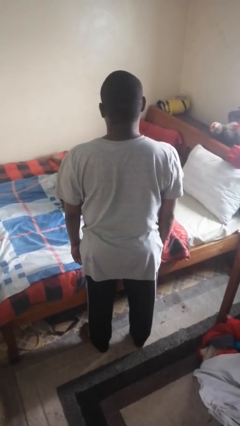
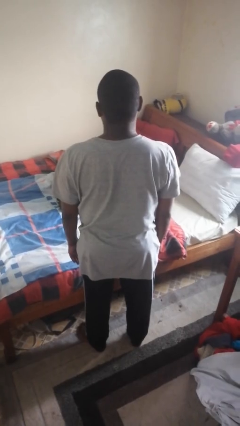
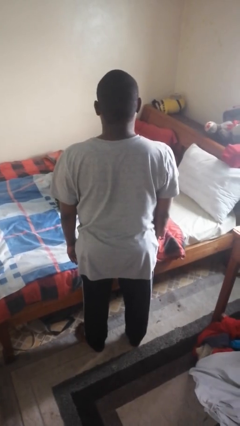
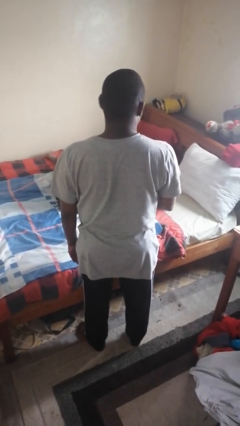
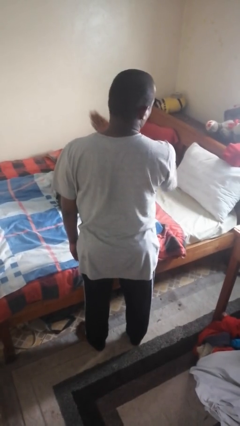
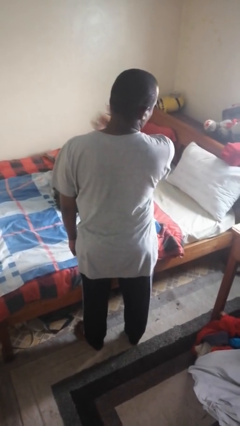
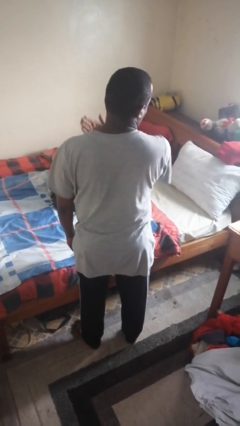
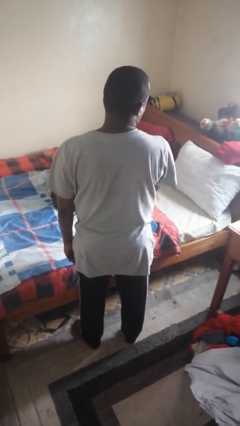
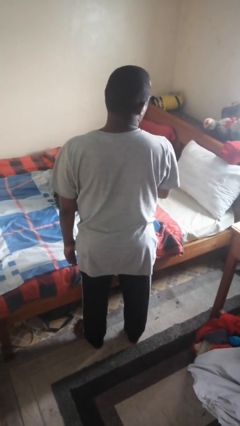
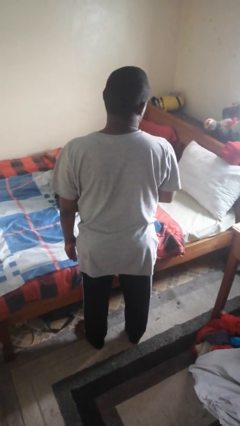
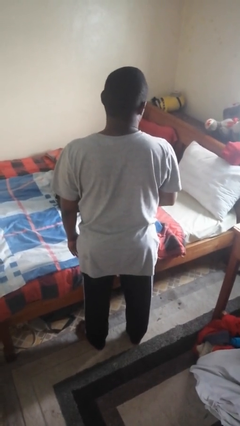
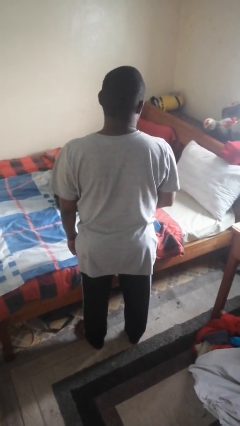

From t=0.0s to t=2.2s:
person swats bug

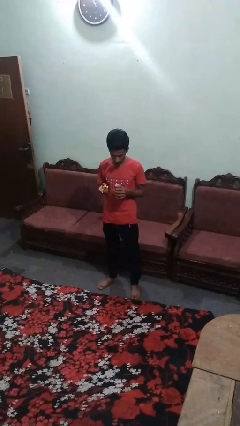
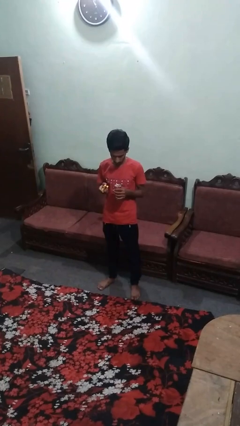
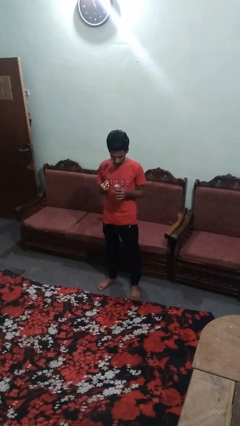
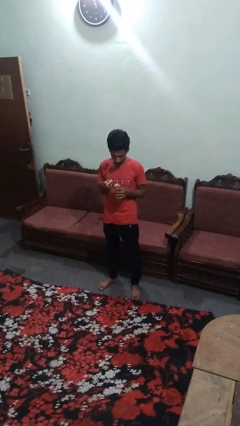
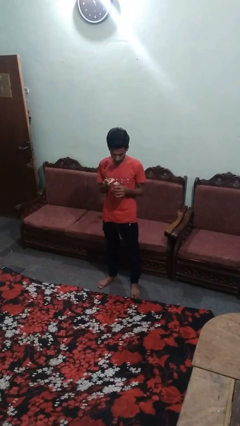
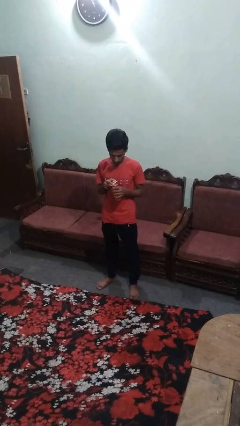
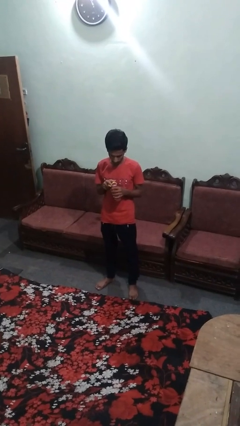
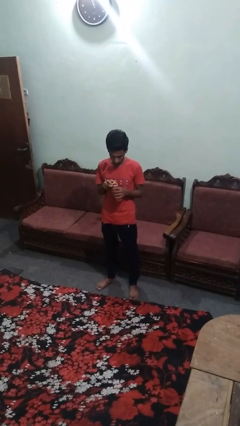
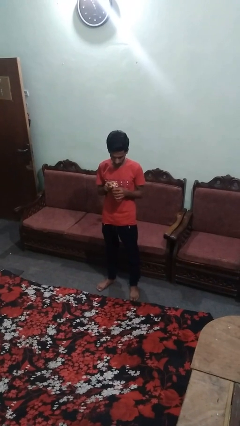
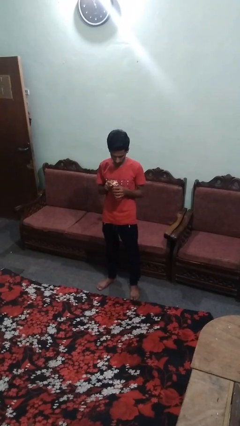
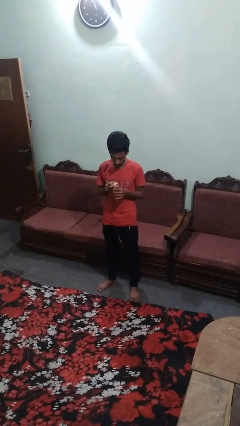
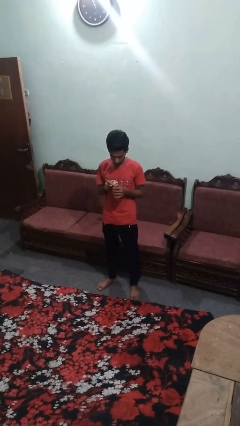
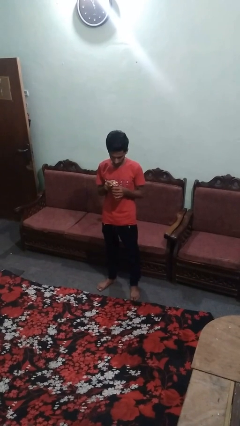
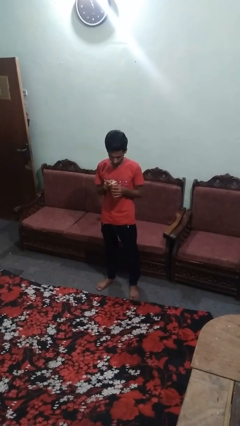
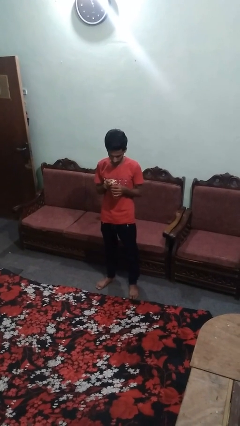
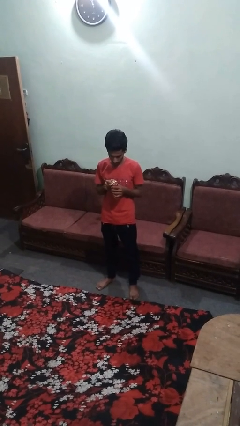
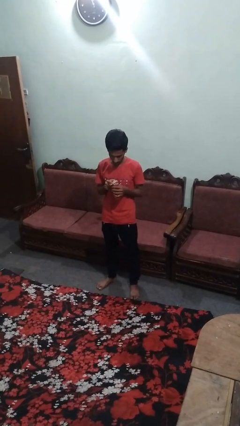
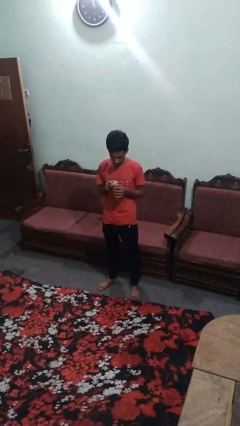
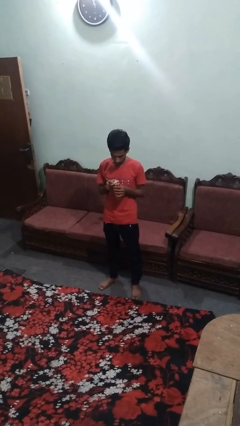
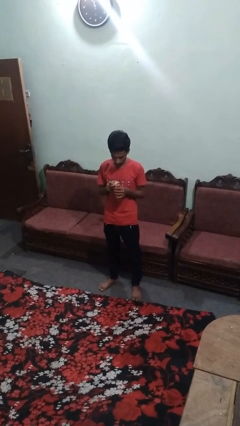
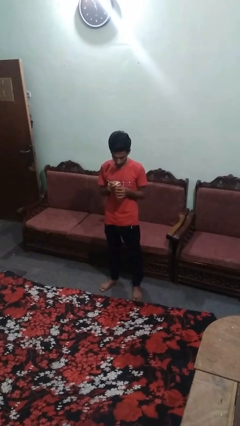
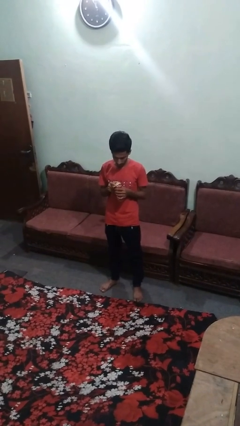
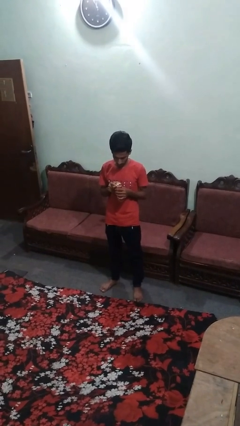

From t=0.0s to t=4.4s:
person opens can with can opener

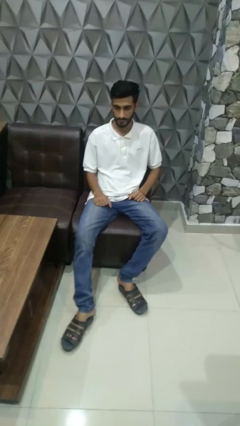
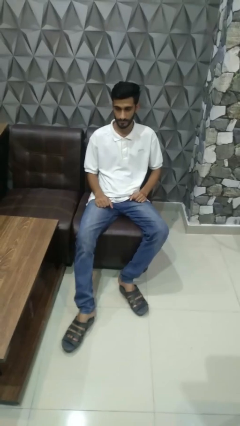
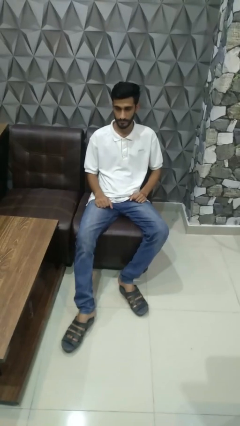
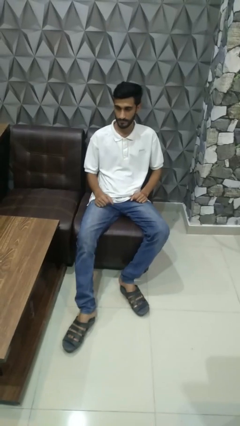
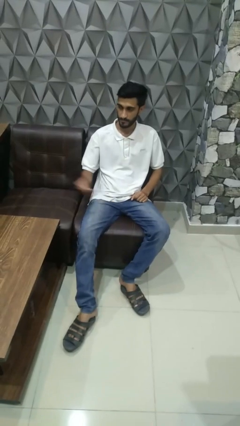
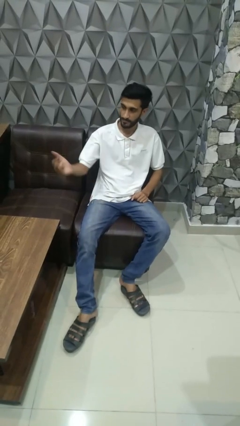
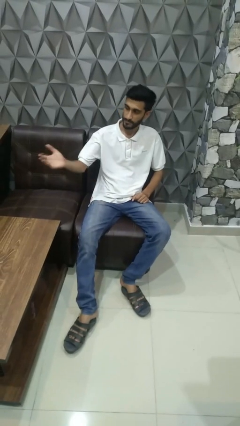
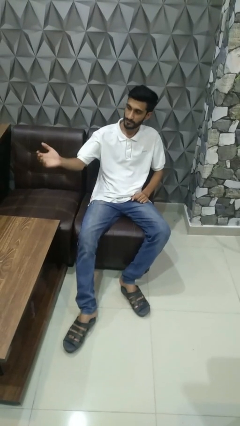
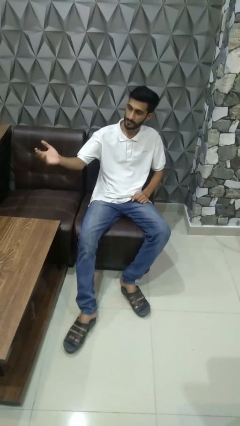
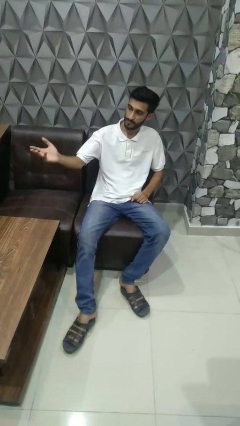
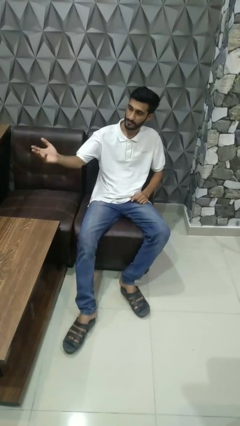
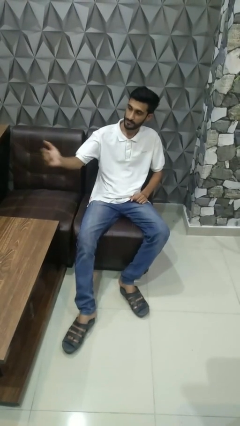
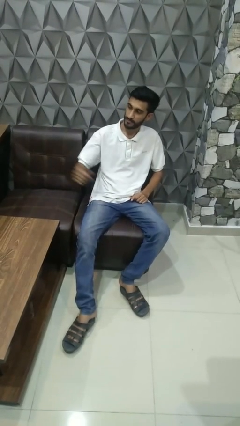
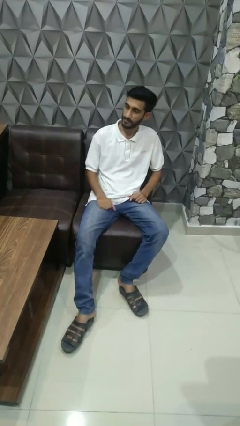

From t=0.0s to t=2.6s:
person gestures come here

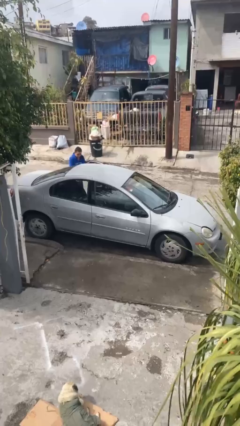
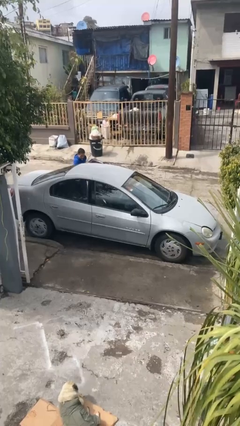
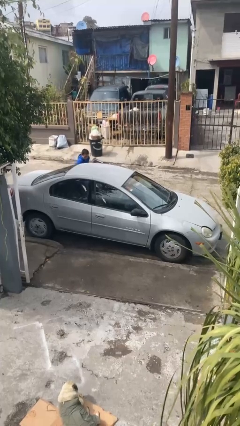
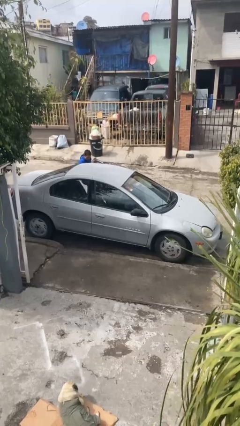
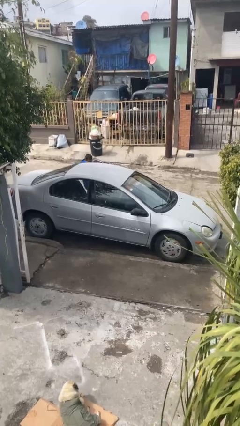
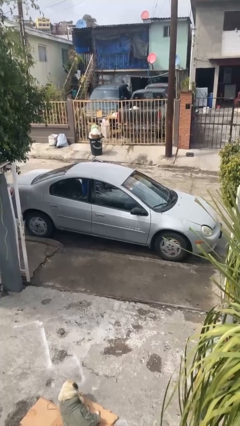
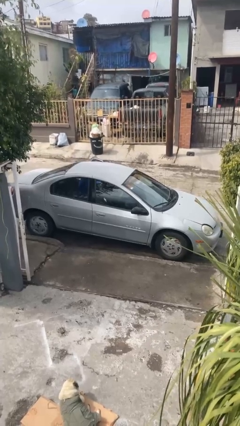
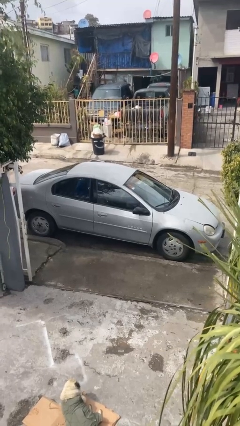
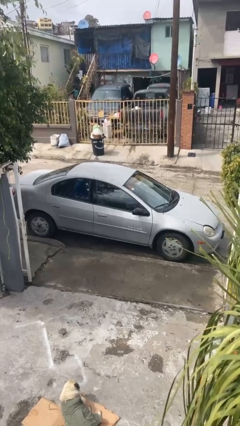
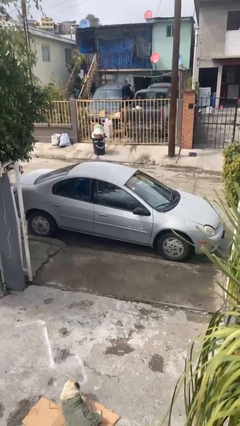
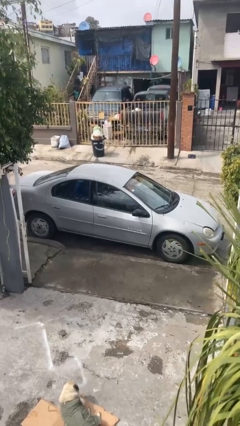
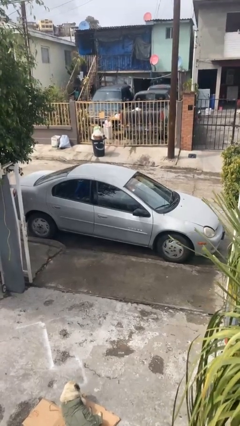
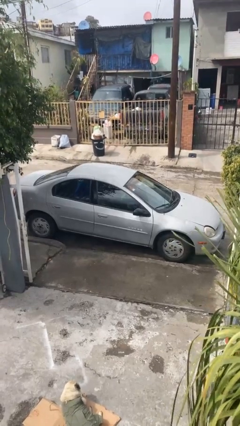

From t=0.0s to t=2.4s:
car picks up person

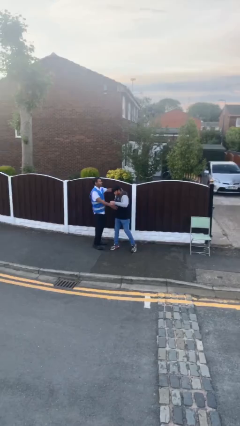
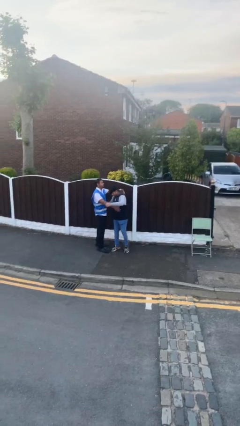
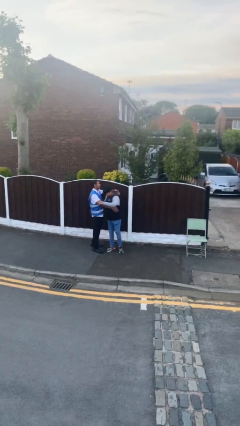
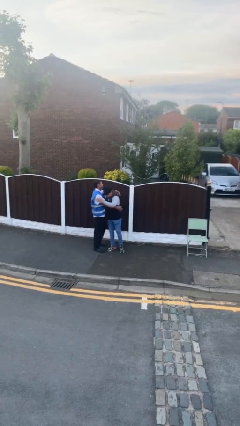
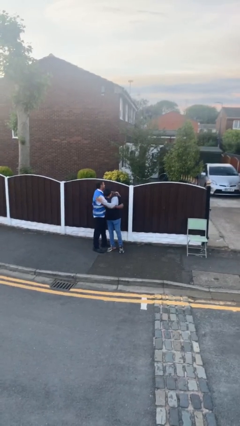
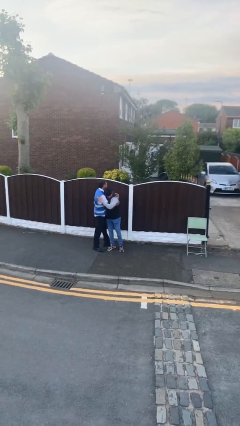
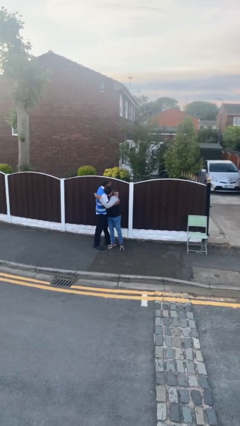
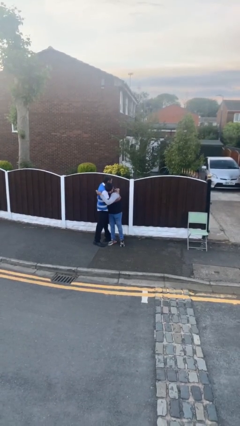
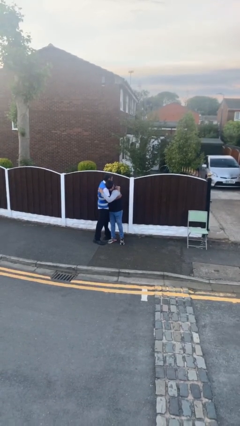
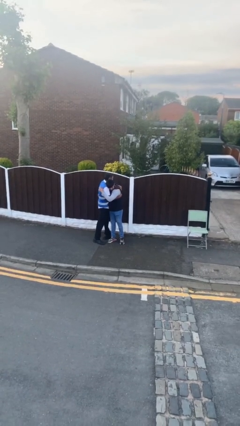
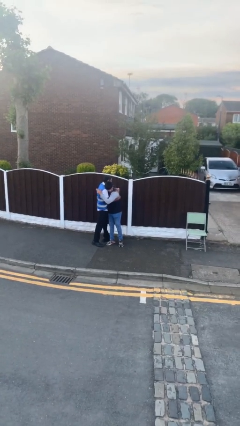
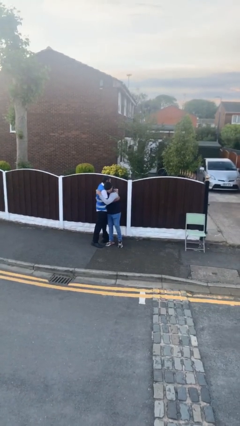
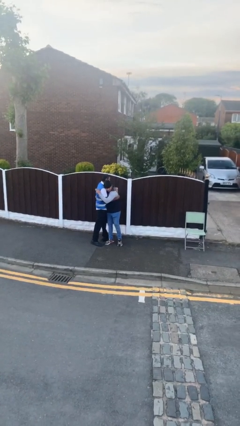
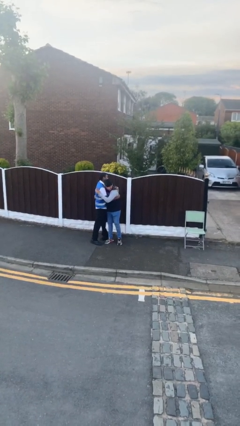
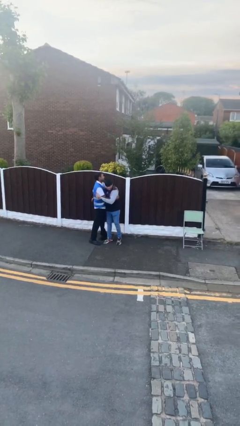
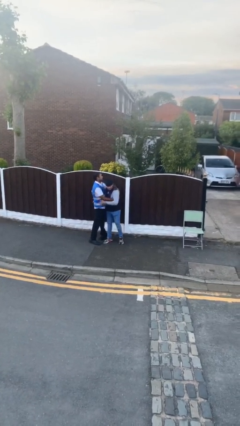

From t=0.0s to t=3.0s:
person embraces person

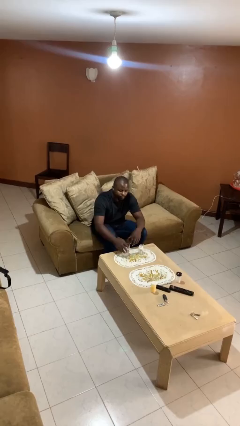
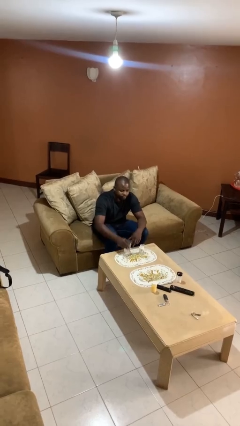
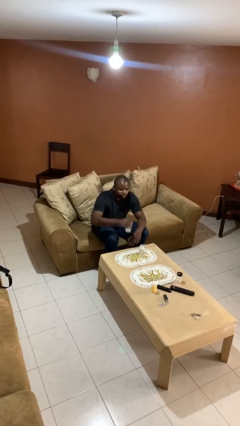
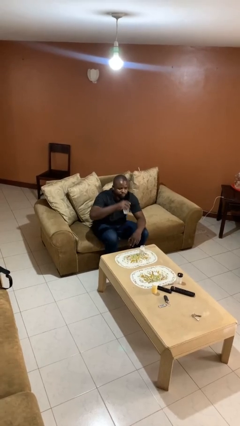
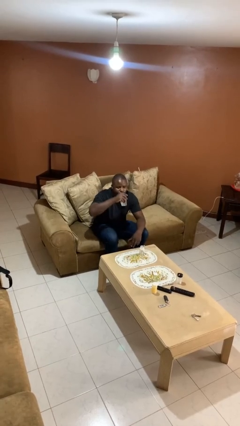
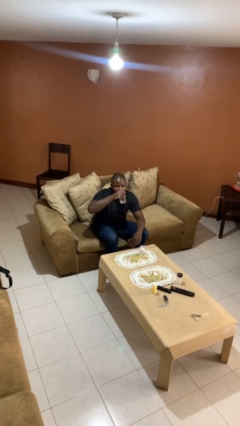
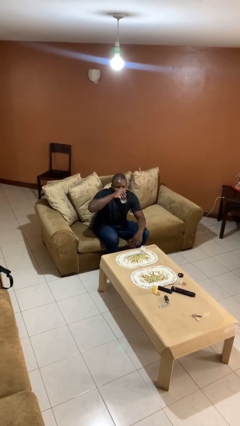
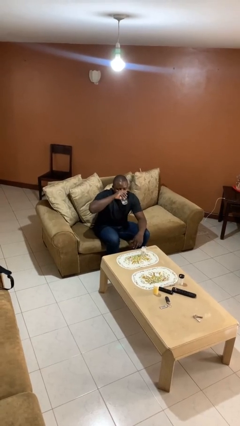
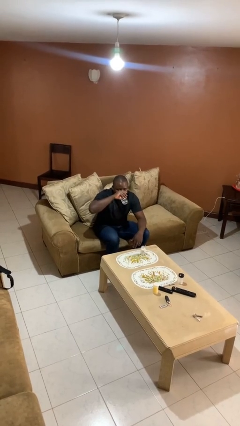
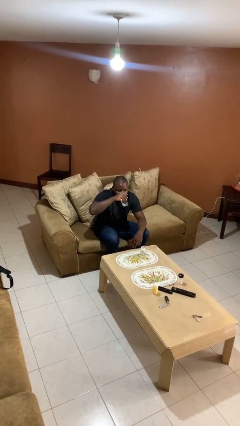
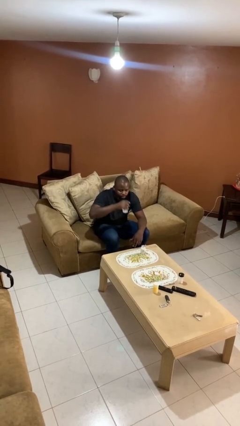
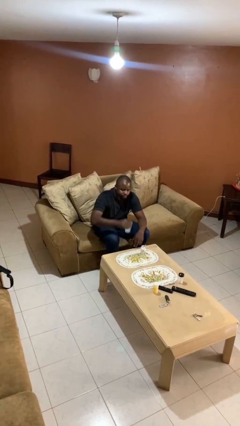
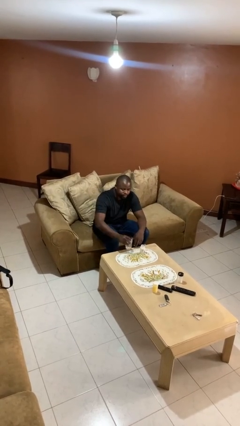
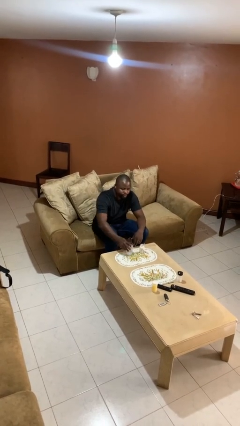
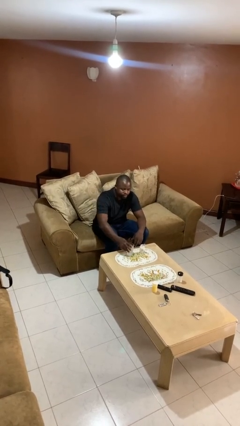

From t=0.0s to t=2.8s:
person drinks from cup
